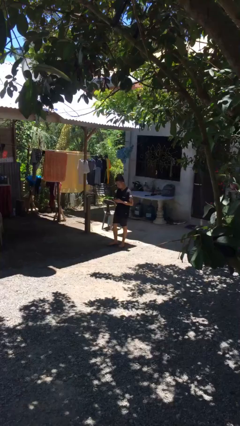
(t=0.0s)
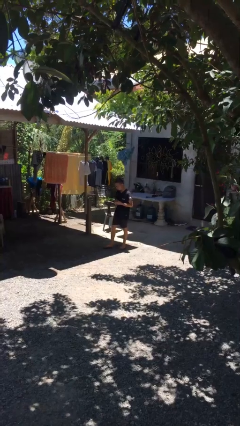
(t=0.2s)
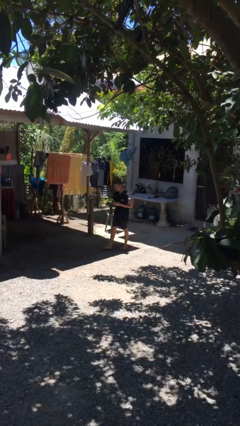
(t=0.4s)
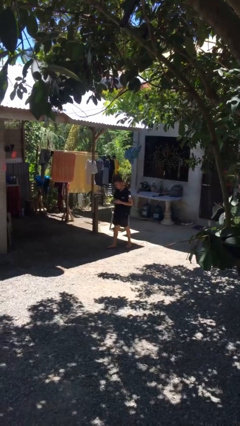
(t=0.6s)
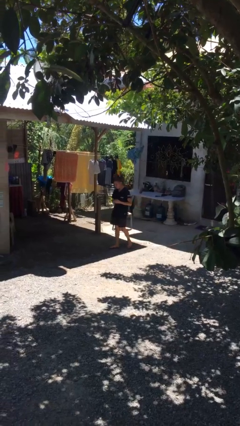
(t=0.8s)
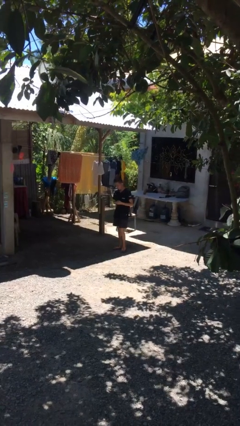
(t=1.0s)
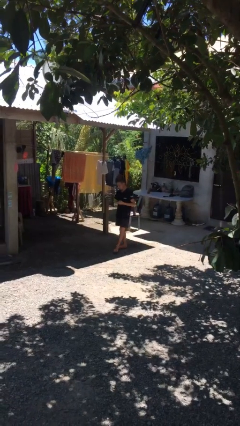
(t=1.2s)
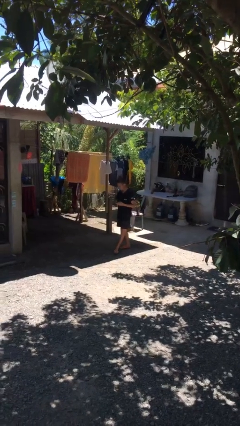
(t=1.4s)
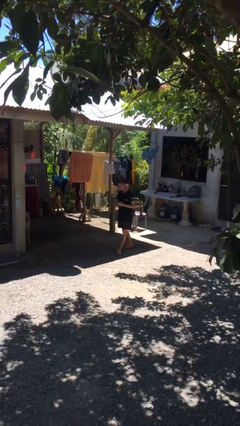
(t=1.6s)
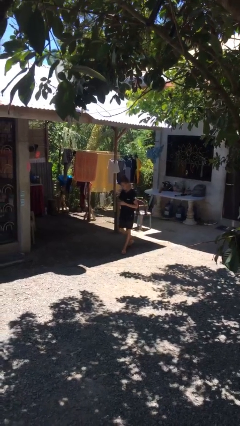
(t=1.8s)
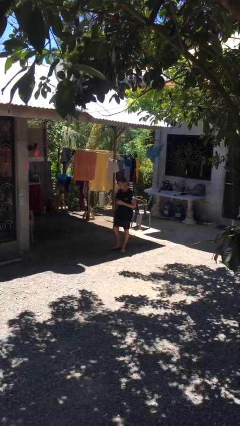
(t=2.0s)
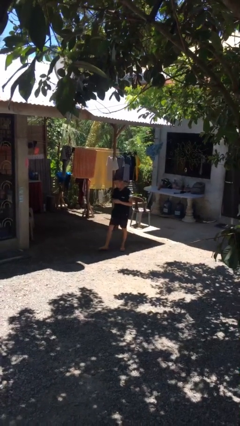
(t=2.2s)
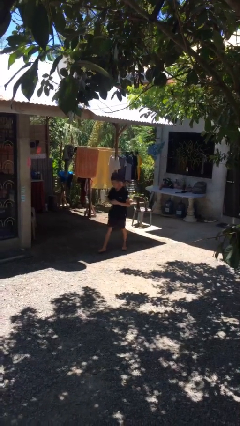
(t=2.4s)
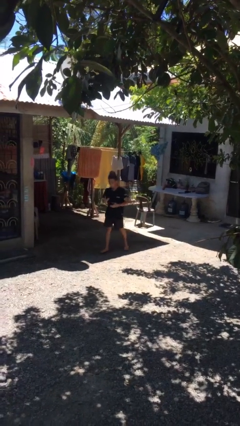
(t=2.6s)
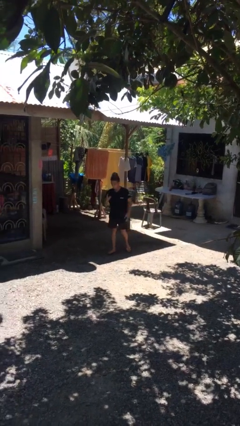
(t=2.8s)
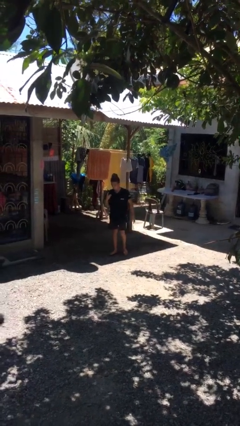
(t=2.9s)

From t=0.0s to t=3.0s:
person texts on phone

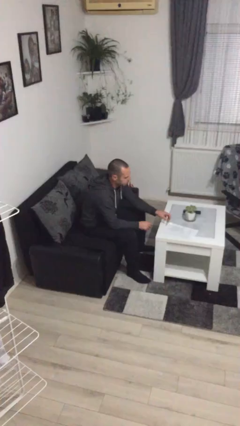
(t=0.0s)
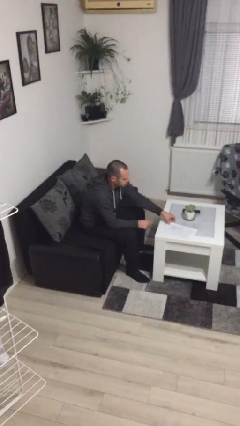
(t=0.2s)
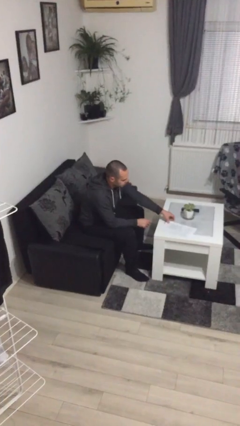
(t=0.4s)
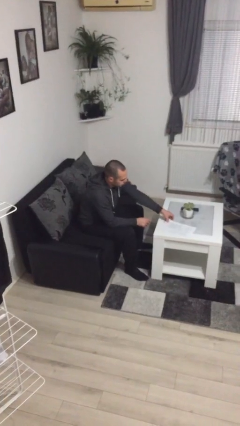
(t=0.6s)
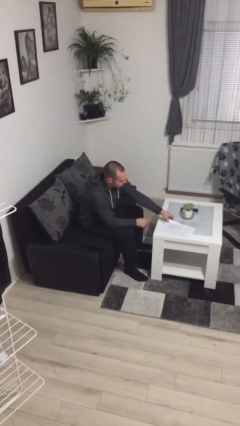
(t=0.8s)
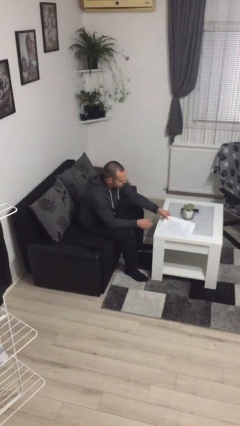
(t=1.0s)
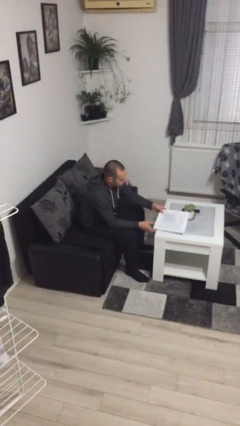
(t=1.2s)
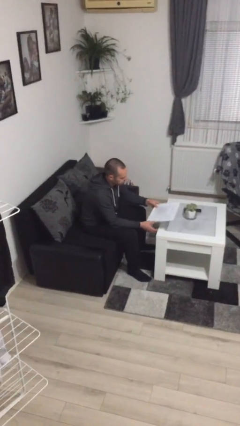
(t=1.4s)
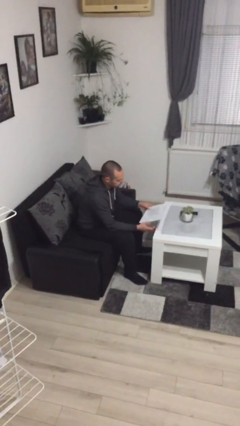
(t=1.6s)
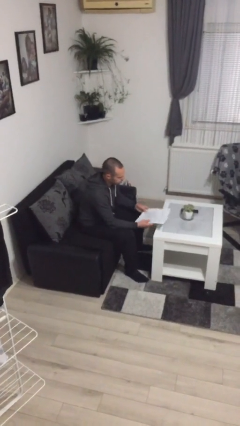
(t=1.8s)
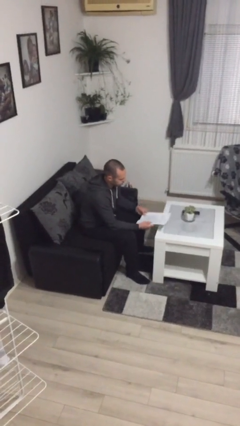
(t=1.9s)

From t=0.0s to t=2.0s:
person picks up object from table

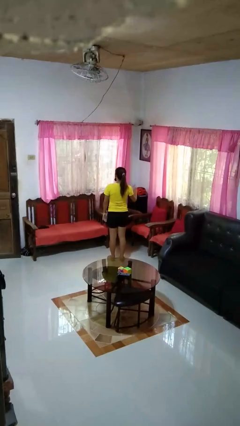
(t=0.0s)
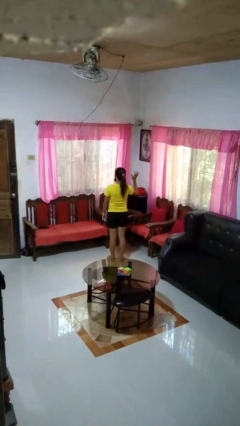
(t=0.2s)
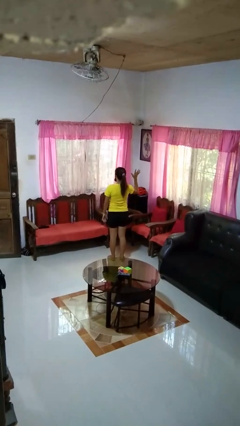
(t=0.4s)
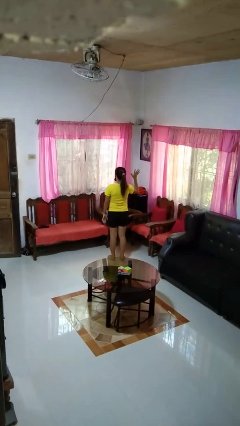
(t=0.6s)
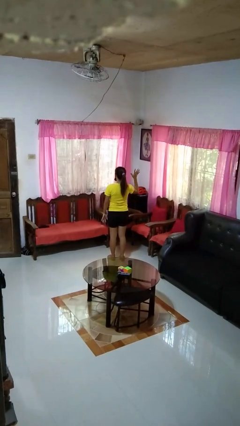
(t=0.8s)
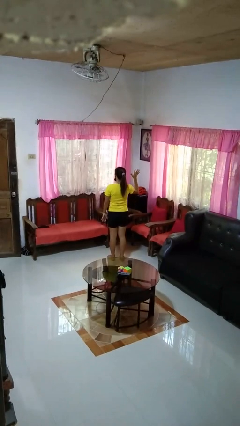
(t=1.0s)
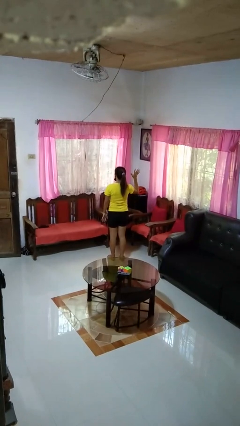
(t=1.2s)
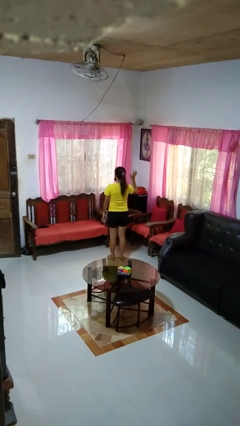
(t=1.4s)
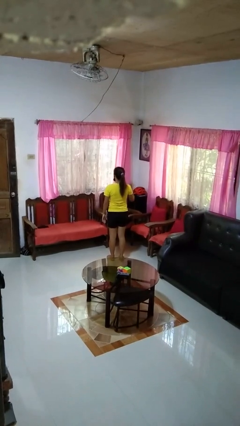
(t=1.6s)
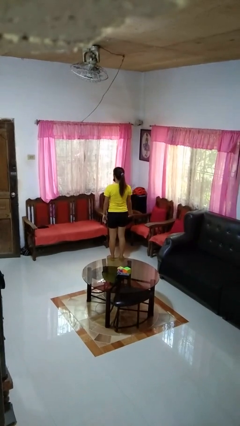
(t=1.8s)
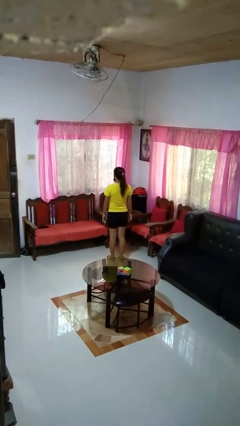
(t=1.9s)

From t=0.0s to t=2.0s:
person gestures number five

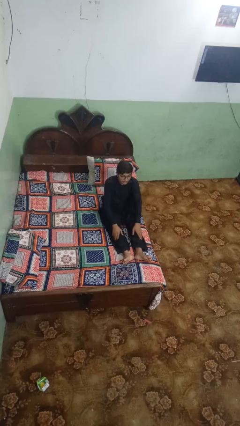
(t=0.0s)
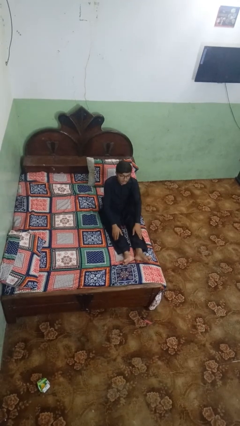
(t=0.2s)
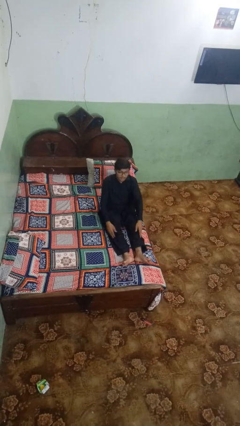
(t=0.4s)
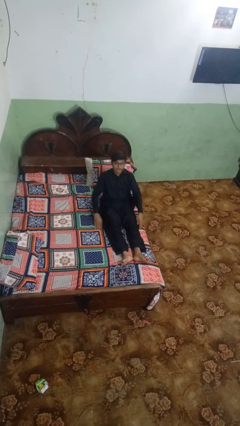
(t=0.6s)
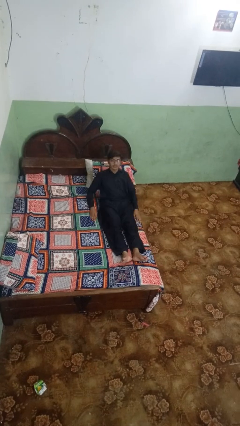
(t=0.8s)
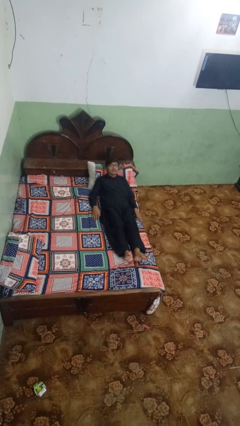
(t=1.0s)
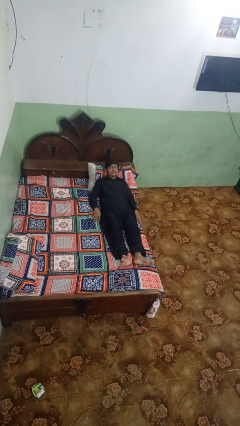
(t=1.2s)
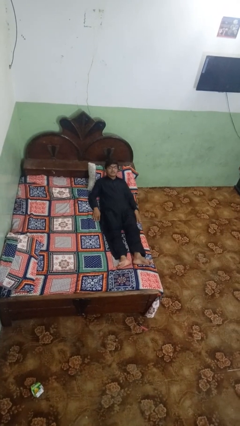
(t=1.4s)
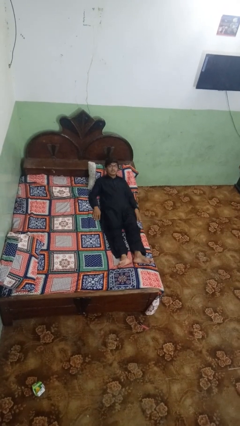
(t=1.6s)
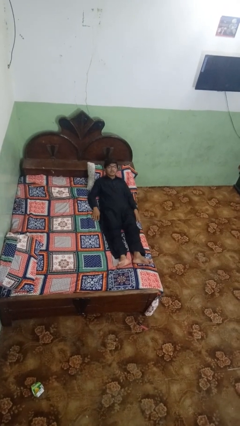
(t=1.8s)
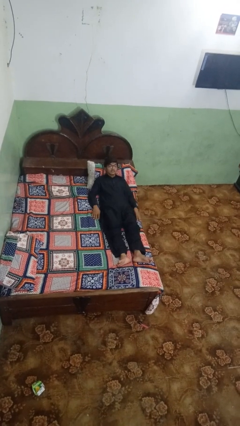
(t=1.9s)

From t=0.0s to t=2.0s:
person lies down on bed

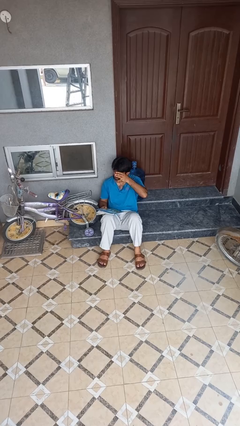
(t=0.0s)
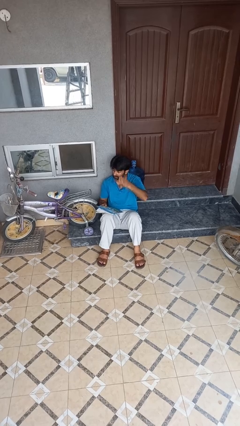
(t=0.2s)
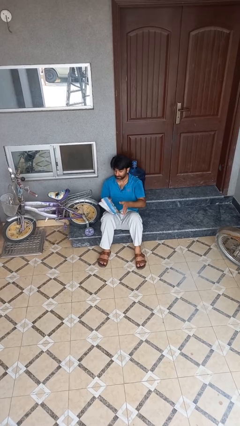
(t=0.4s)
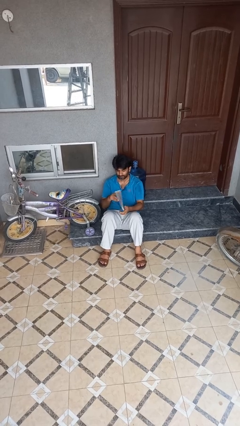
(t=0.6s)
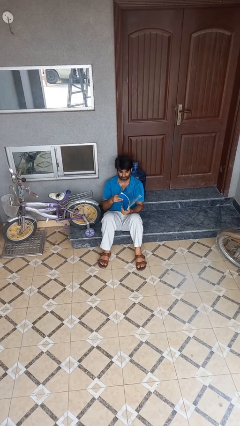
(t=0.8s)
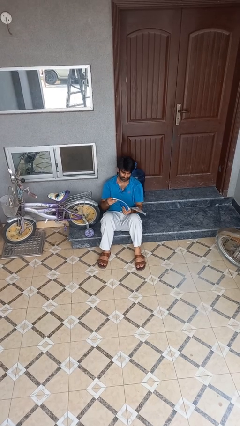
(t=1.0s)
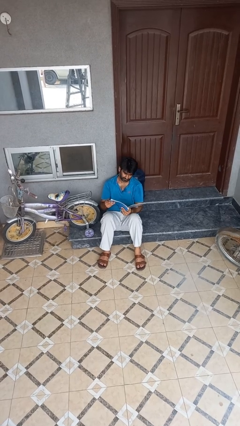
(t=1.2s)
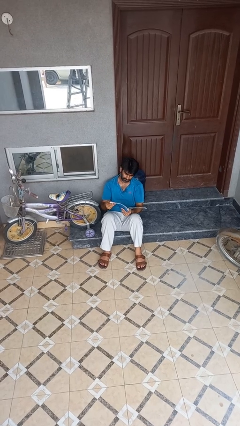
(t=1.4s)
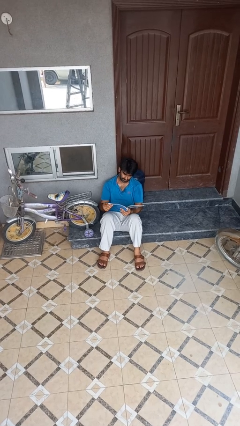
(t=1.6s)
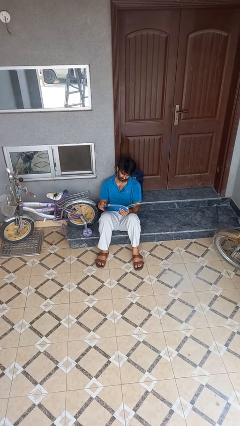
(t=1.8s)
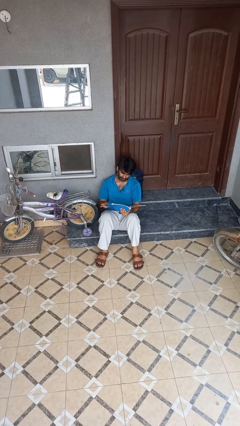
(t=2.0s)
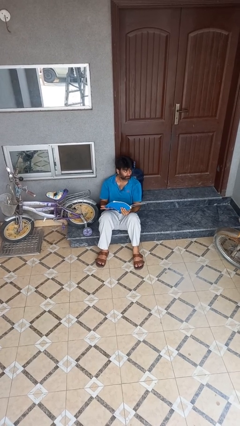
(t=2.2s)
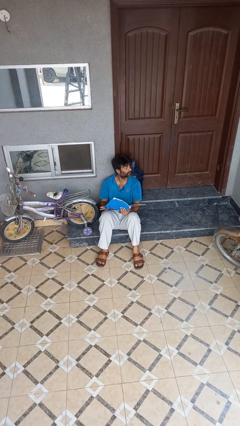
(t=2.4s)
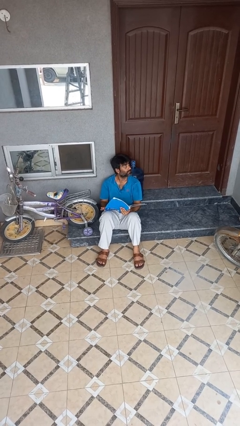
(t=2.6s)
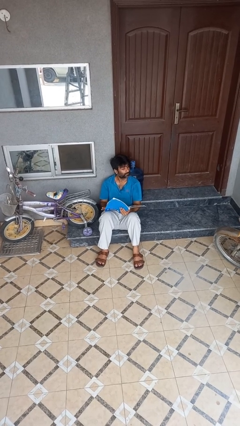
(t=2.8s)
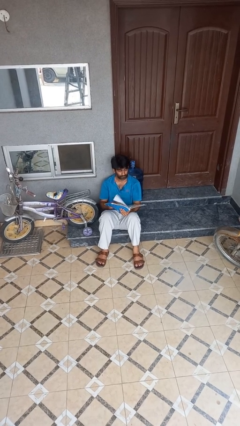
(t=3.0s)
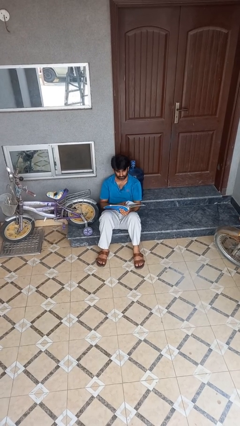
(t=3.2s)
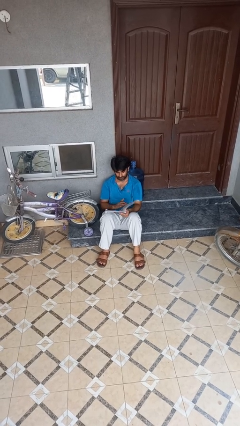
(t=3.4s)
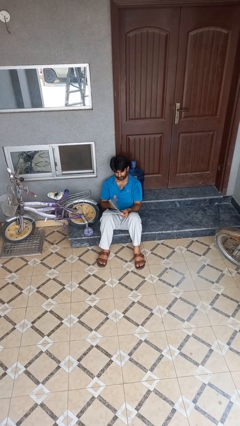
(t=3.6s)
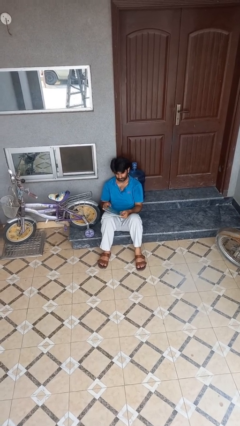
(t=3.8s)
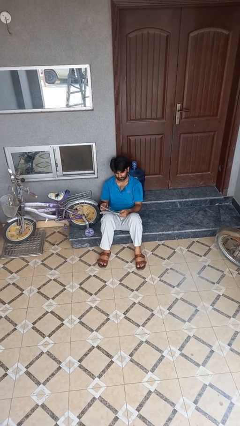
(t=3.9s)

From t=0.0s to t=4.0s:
person reads book

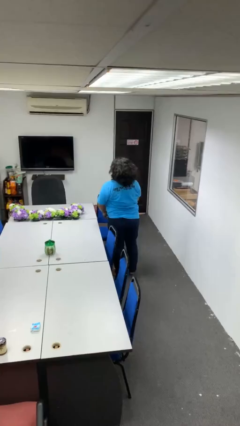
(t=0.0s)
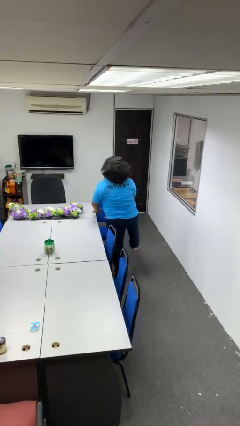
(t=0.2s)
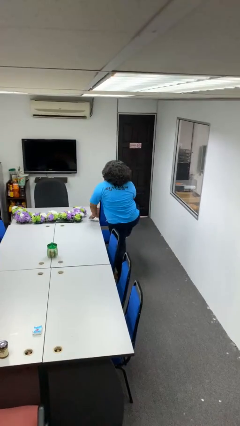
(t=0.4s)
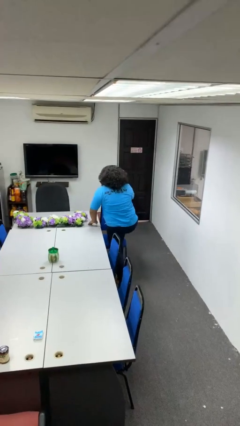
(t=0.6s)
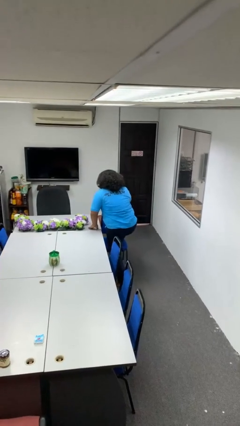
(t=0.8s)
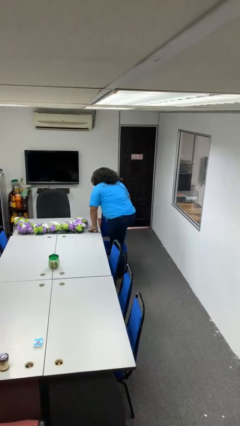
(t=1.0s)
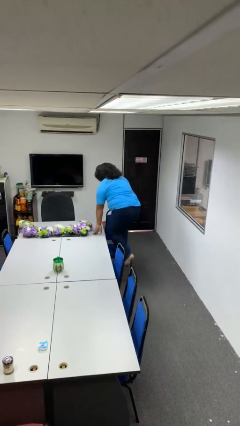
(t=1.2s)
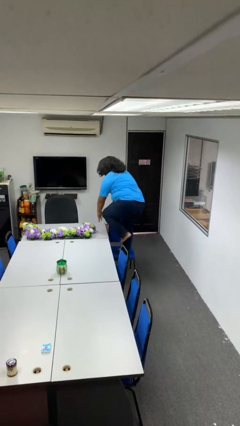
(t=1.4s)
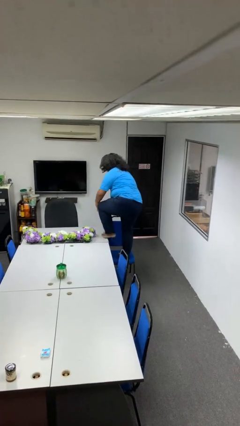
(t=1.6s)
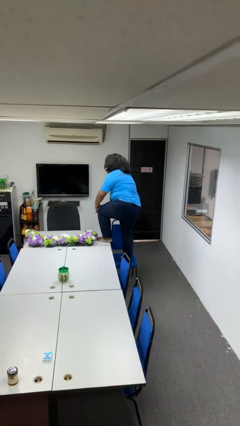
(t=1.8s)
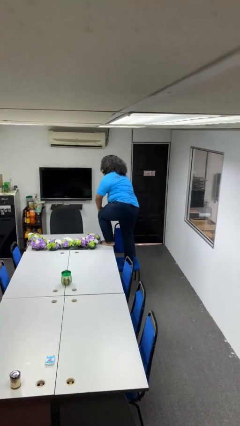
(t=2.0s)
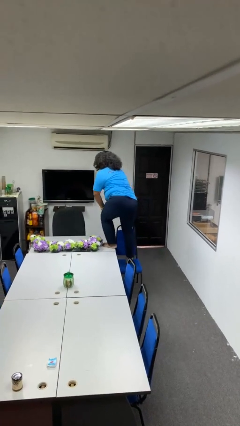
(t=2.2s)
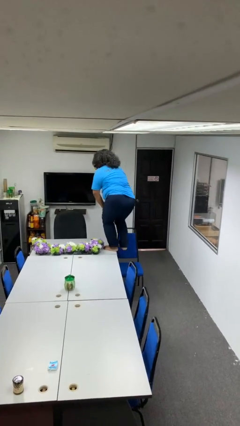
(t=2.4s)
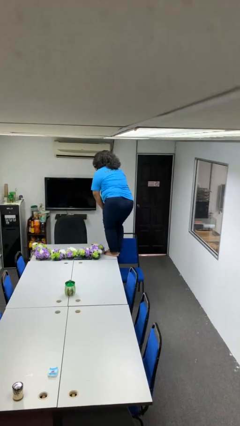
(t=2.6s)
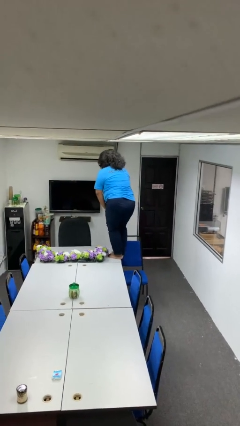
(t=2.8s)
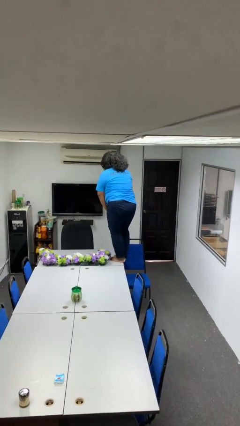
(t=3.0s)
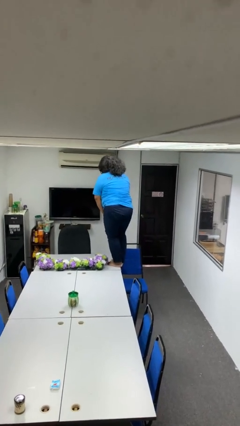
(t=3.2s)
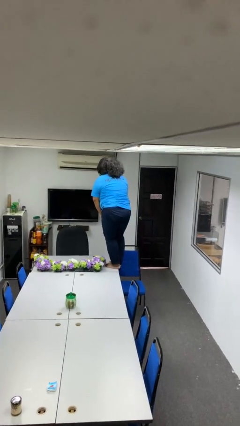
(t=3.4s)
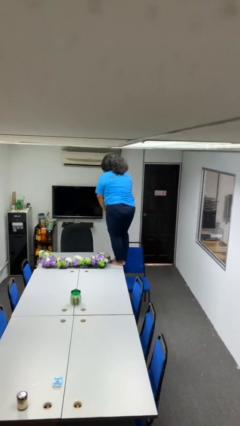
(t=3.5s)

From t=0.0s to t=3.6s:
person climbs on table

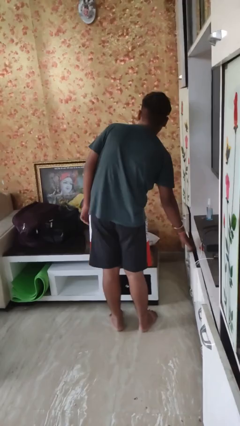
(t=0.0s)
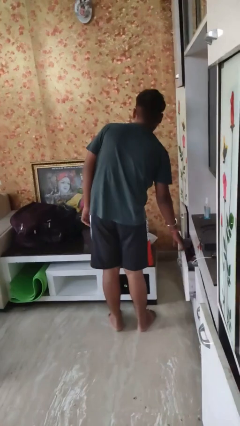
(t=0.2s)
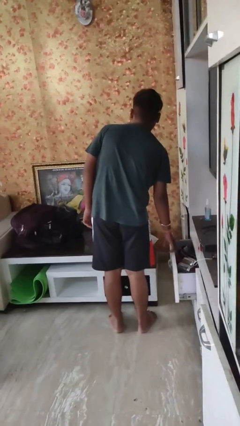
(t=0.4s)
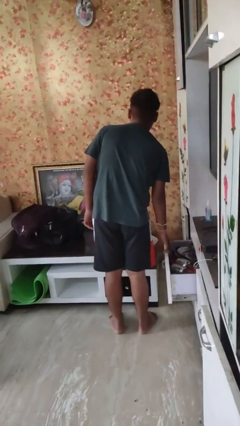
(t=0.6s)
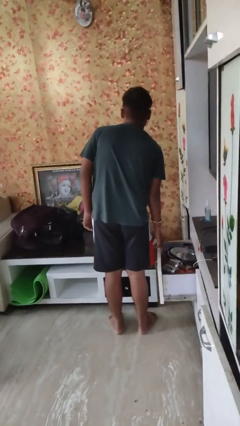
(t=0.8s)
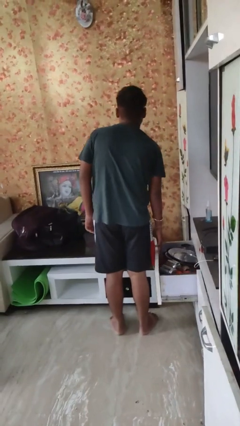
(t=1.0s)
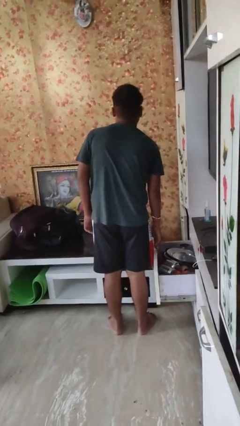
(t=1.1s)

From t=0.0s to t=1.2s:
person opens kitchen drawer
